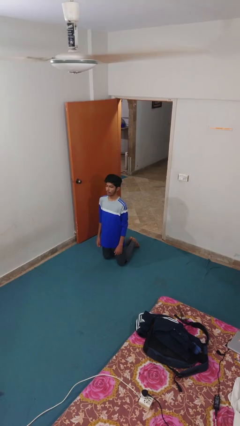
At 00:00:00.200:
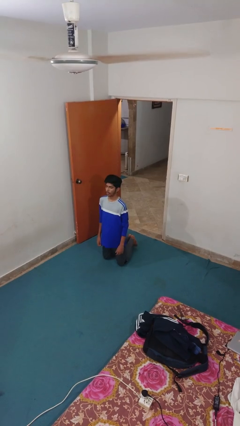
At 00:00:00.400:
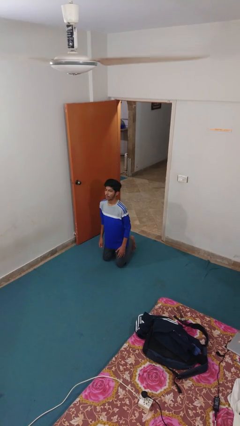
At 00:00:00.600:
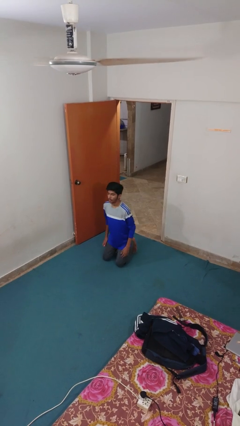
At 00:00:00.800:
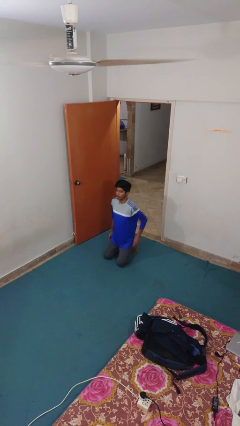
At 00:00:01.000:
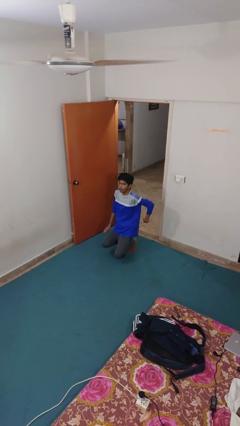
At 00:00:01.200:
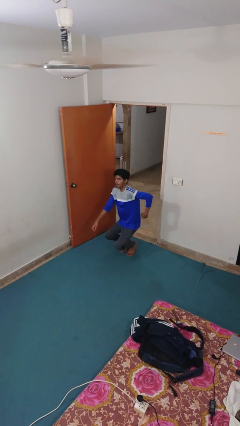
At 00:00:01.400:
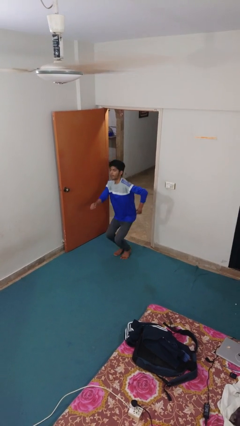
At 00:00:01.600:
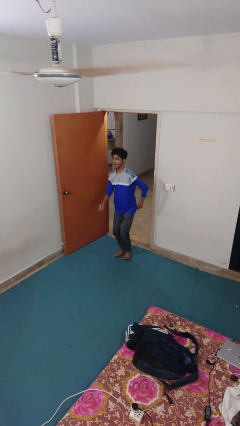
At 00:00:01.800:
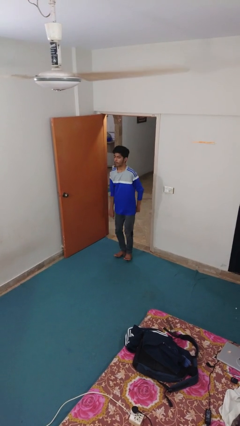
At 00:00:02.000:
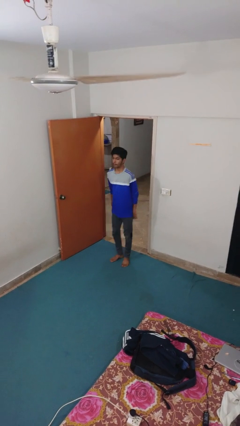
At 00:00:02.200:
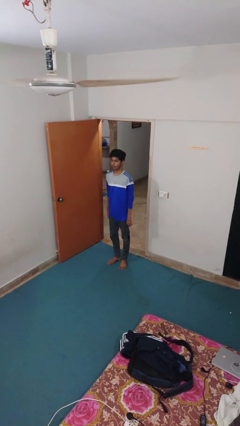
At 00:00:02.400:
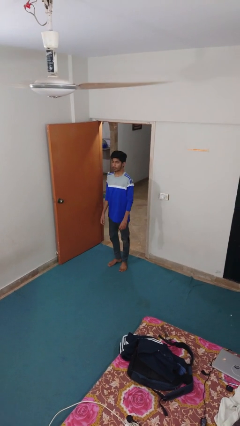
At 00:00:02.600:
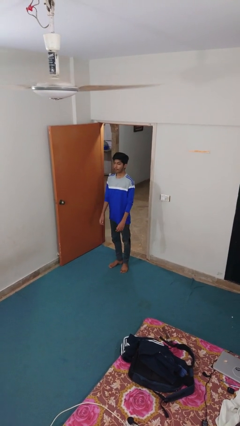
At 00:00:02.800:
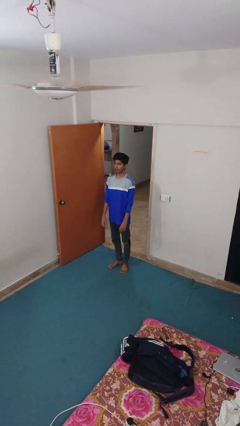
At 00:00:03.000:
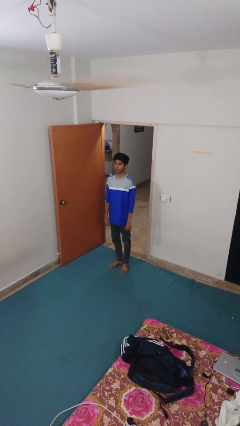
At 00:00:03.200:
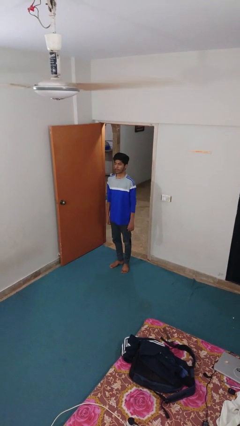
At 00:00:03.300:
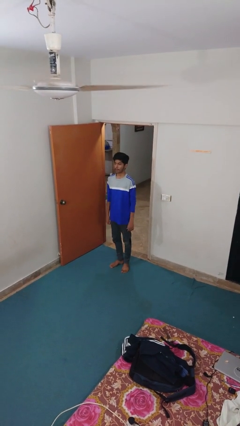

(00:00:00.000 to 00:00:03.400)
person stands up from floor

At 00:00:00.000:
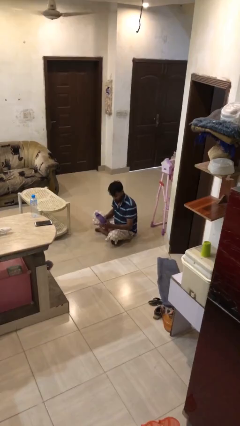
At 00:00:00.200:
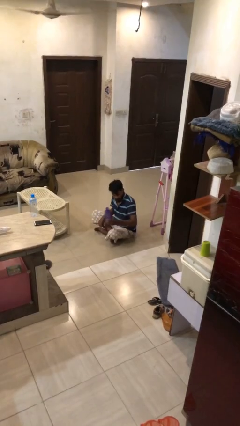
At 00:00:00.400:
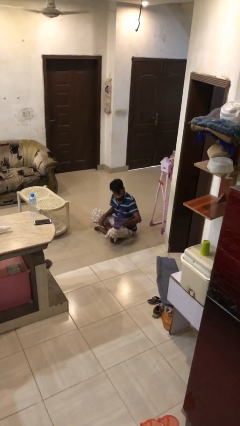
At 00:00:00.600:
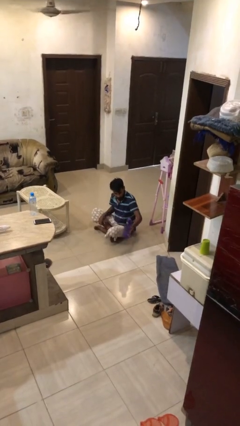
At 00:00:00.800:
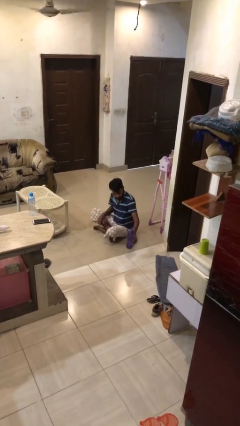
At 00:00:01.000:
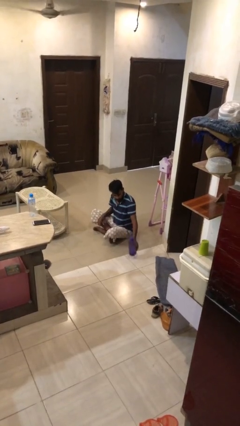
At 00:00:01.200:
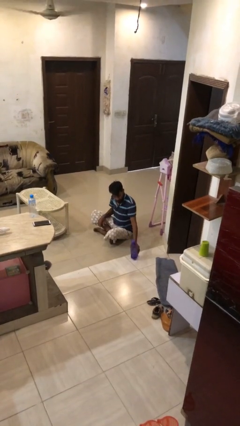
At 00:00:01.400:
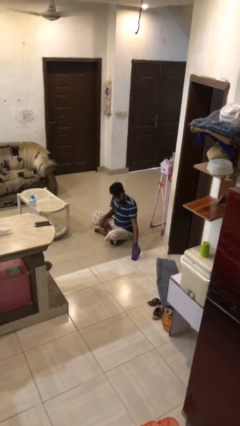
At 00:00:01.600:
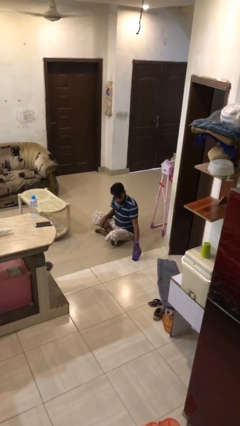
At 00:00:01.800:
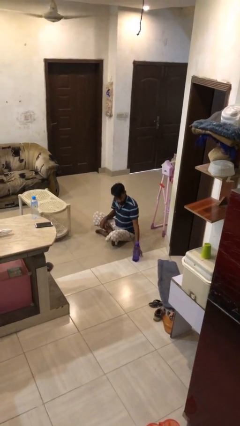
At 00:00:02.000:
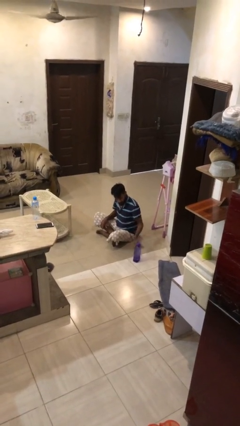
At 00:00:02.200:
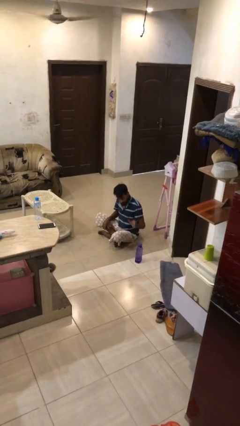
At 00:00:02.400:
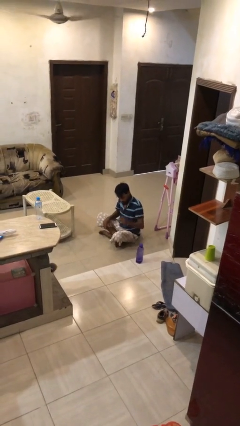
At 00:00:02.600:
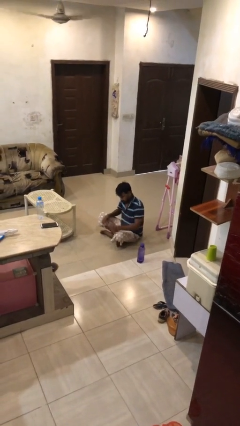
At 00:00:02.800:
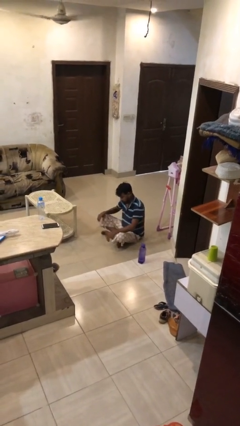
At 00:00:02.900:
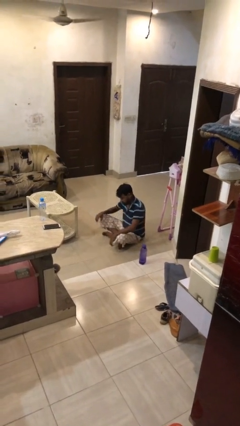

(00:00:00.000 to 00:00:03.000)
person puts down object on floor

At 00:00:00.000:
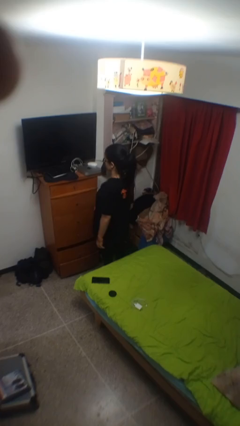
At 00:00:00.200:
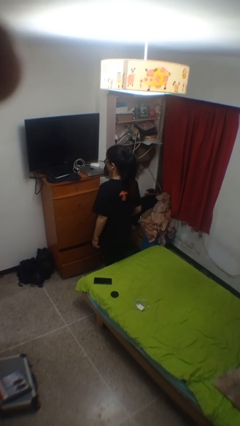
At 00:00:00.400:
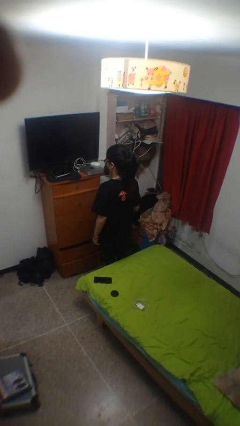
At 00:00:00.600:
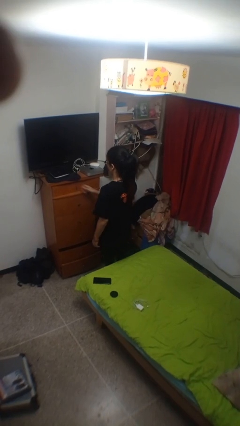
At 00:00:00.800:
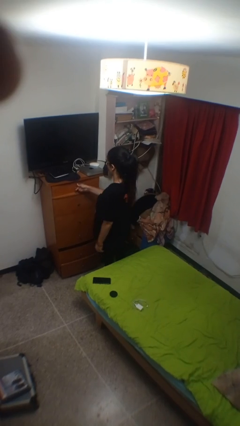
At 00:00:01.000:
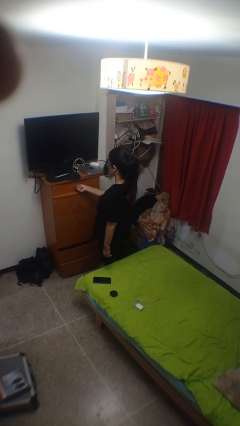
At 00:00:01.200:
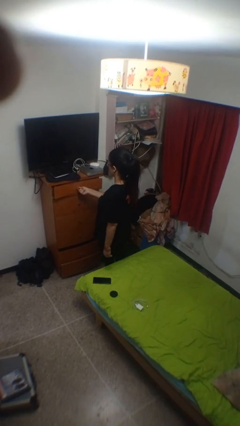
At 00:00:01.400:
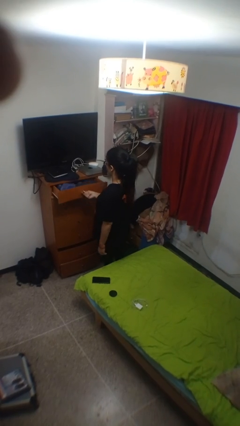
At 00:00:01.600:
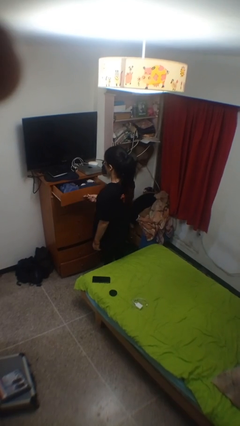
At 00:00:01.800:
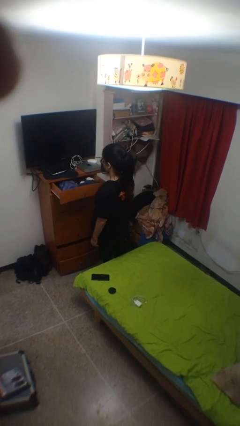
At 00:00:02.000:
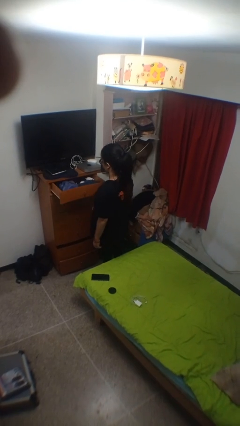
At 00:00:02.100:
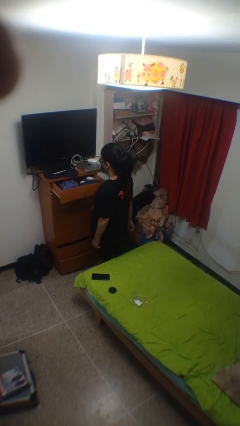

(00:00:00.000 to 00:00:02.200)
person opens dresser drawer

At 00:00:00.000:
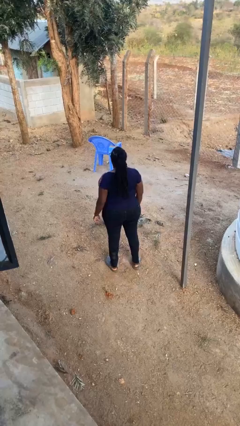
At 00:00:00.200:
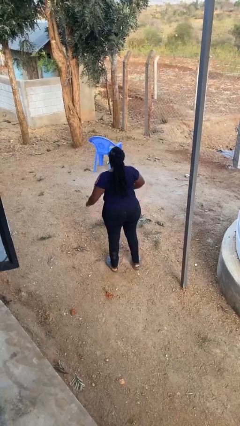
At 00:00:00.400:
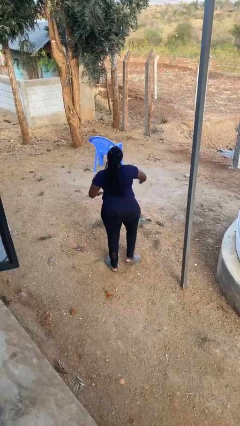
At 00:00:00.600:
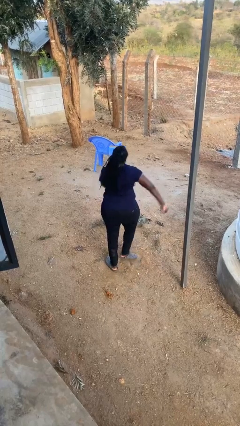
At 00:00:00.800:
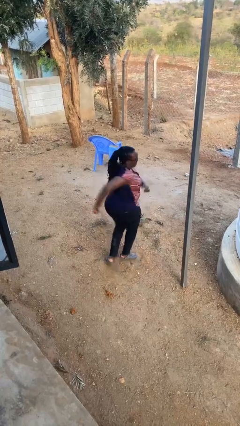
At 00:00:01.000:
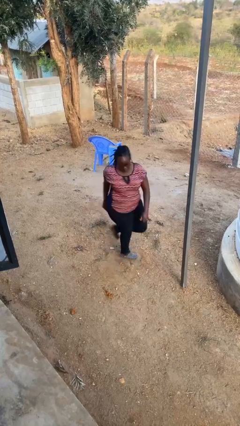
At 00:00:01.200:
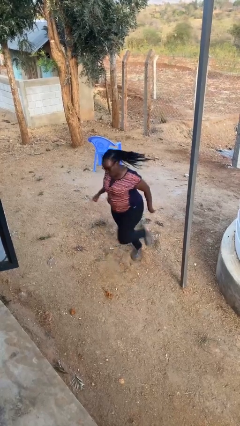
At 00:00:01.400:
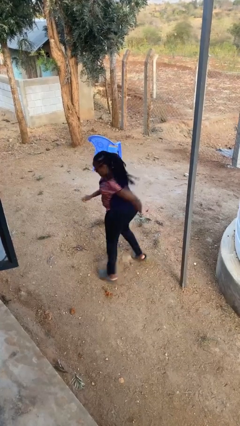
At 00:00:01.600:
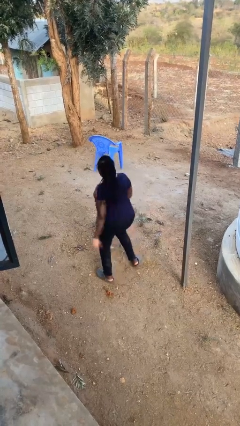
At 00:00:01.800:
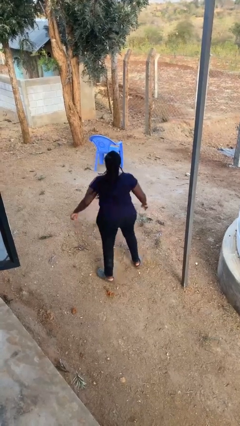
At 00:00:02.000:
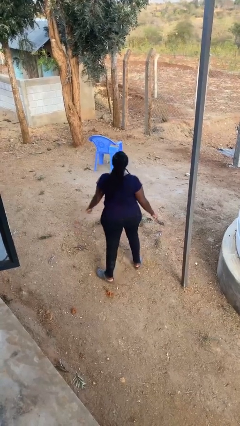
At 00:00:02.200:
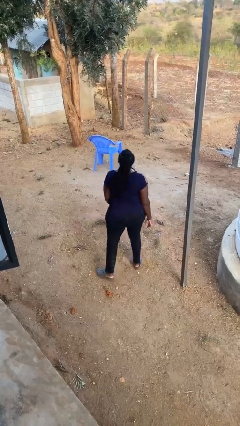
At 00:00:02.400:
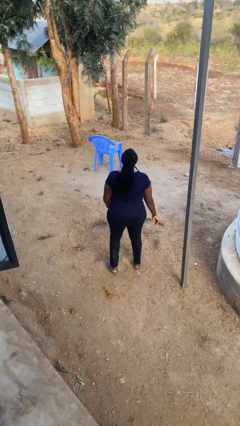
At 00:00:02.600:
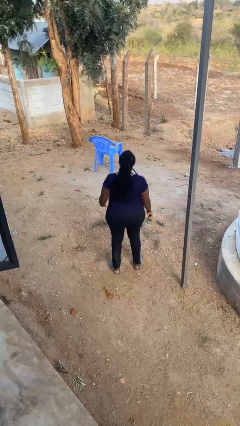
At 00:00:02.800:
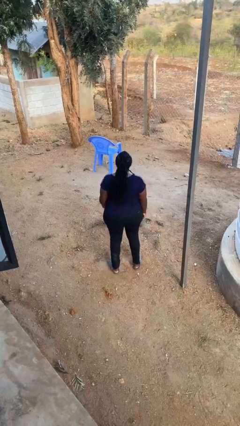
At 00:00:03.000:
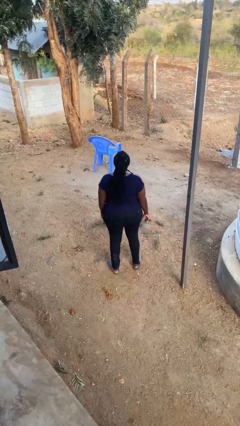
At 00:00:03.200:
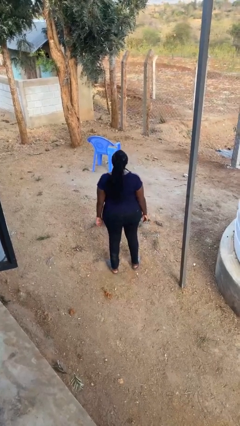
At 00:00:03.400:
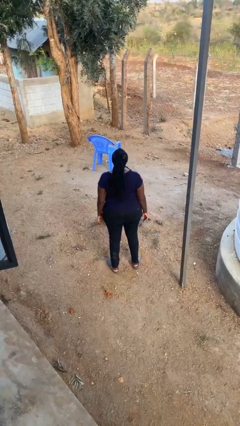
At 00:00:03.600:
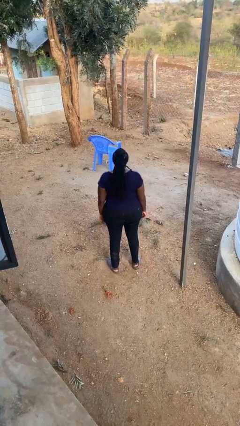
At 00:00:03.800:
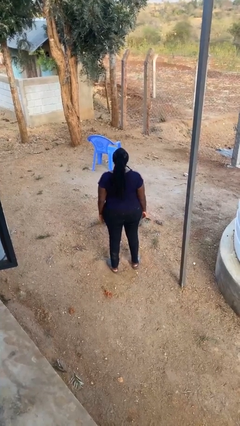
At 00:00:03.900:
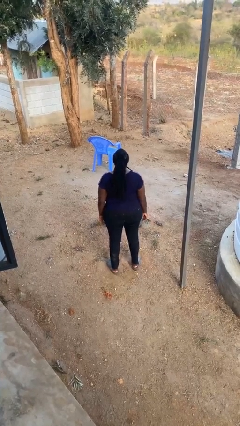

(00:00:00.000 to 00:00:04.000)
person twirls

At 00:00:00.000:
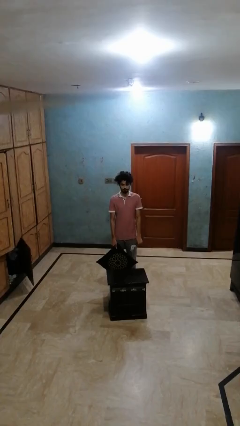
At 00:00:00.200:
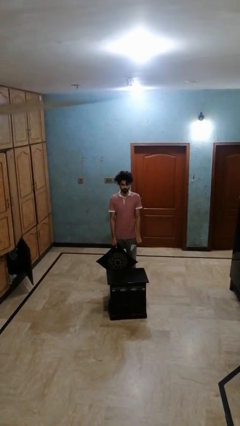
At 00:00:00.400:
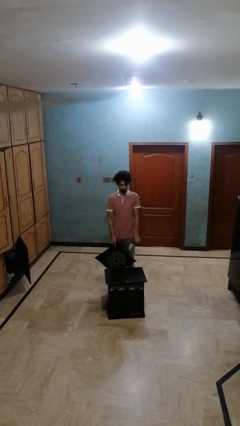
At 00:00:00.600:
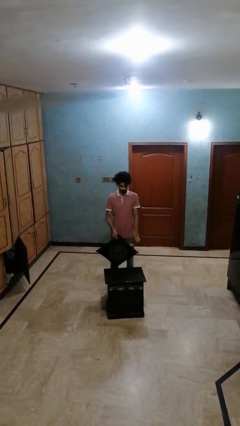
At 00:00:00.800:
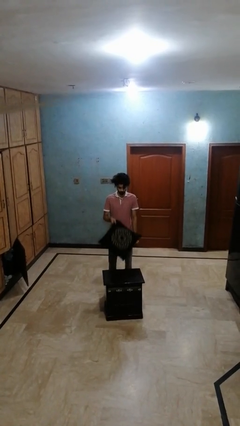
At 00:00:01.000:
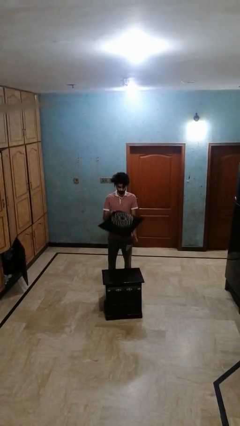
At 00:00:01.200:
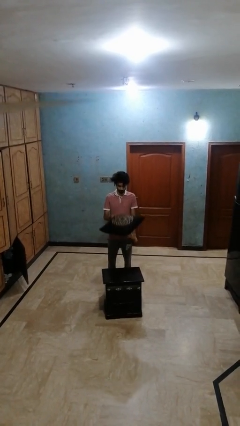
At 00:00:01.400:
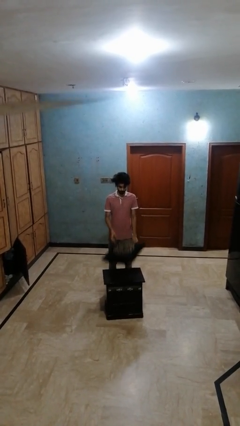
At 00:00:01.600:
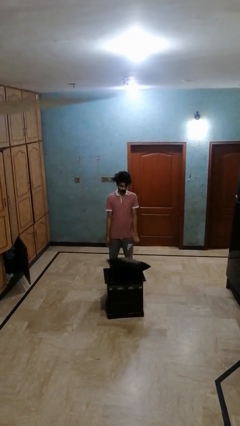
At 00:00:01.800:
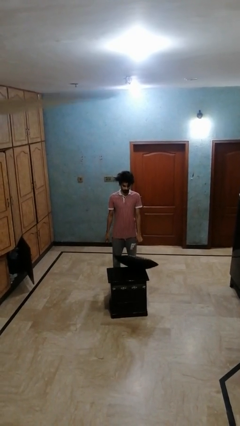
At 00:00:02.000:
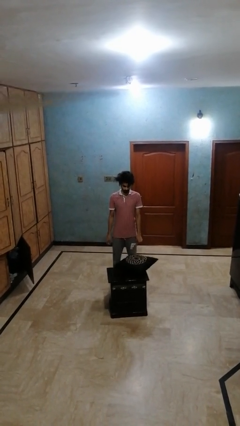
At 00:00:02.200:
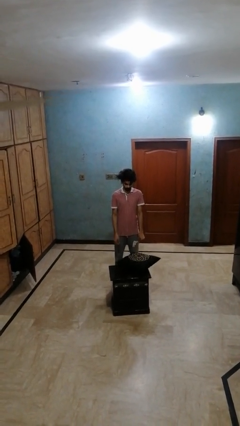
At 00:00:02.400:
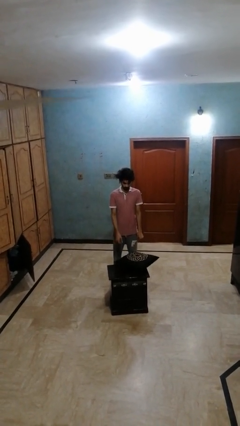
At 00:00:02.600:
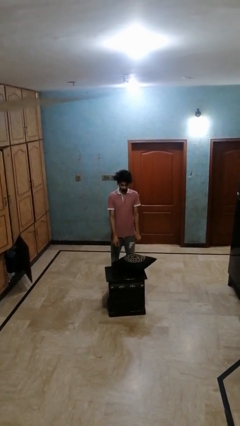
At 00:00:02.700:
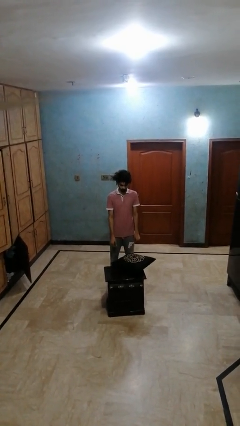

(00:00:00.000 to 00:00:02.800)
person throws object on table

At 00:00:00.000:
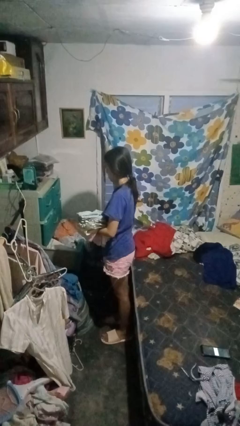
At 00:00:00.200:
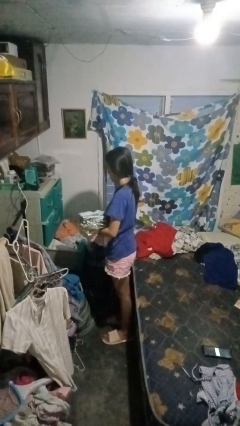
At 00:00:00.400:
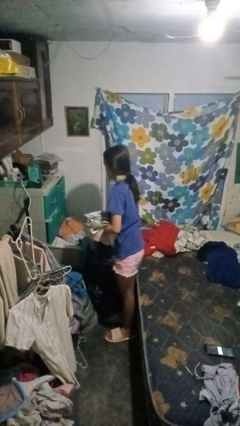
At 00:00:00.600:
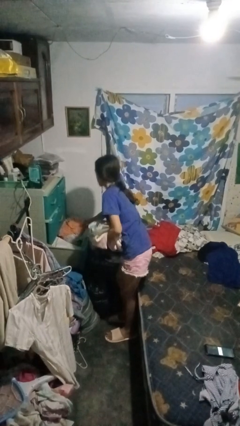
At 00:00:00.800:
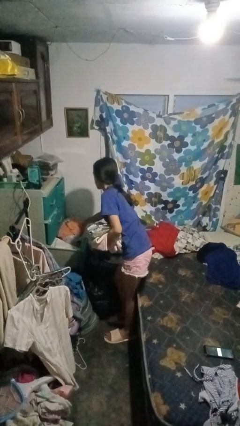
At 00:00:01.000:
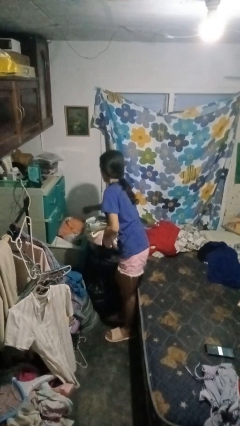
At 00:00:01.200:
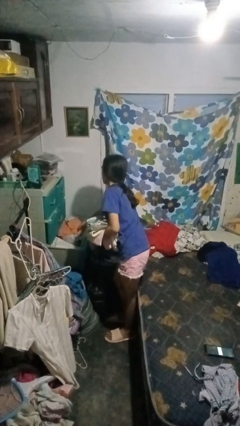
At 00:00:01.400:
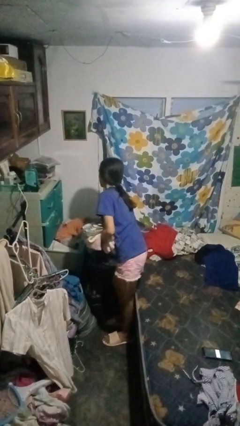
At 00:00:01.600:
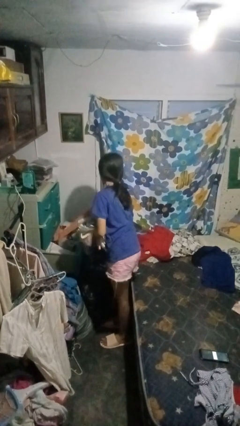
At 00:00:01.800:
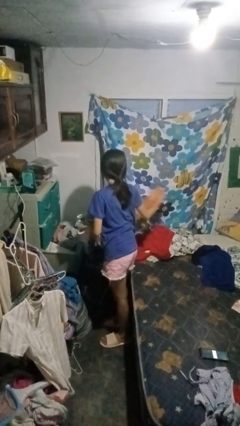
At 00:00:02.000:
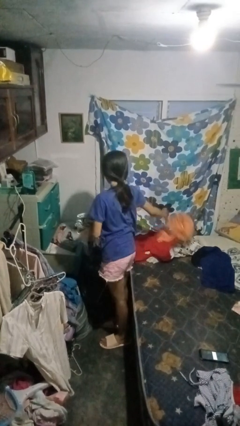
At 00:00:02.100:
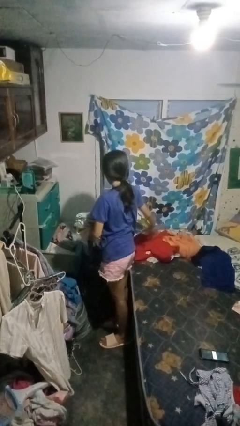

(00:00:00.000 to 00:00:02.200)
person takes clothes from dresser
